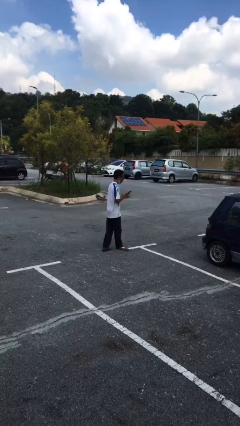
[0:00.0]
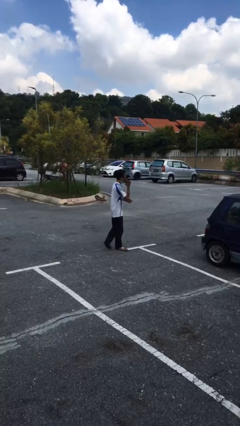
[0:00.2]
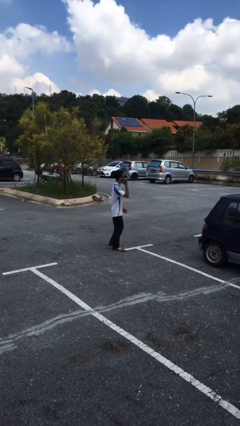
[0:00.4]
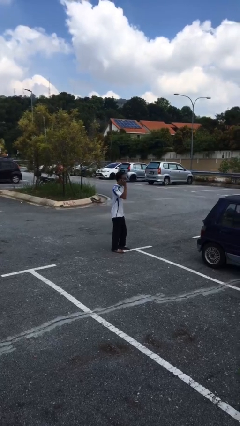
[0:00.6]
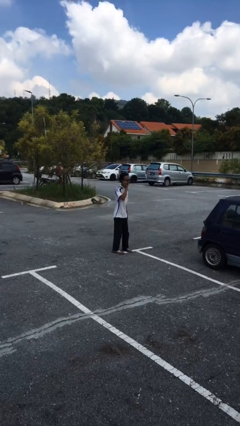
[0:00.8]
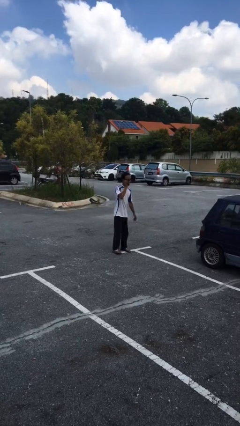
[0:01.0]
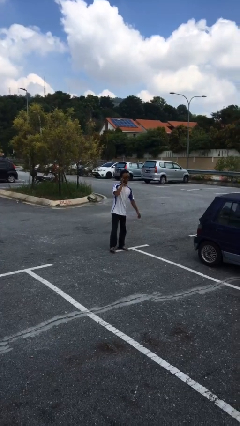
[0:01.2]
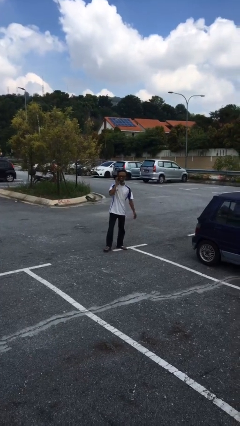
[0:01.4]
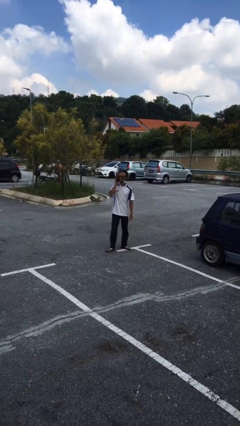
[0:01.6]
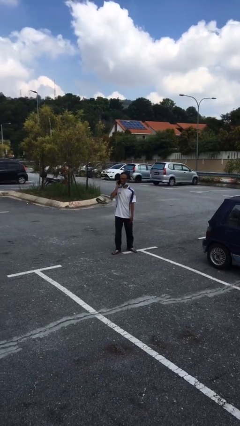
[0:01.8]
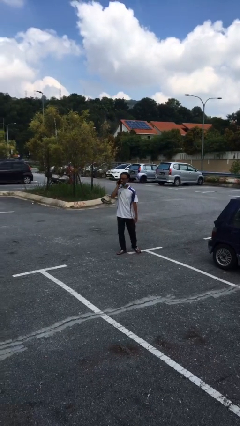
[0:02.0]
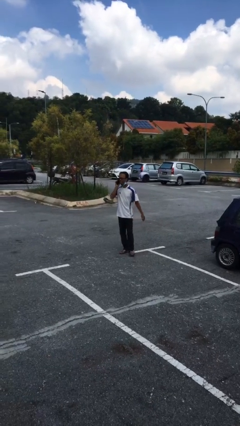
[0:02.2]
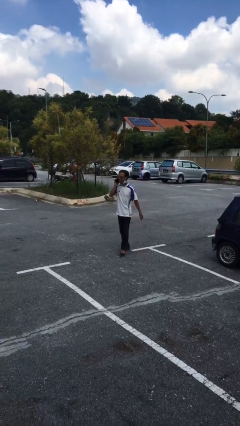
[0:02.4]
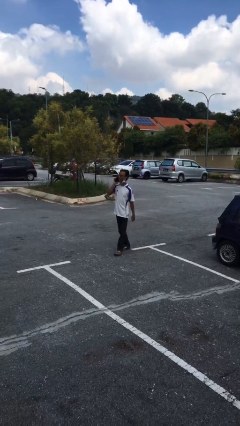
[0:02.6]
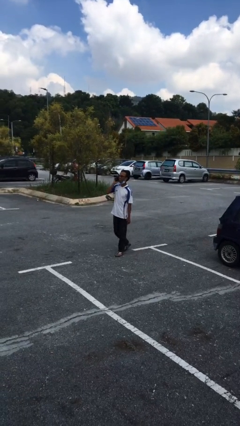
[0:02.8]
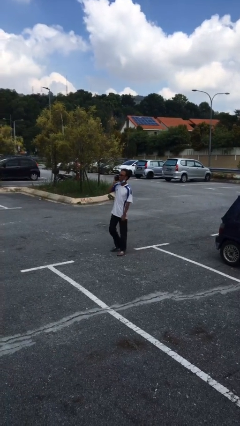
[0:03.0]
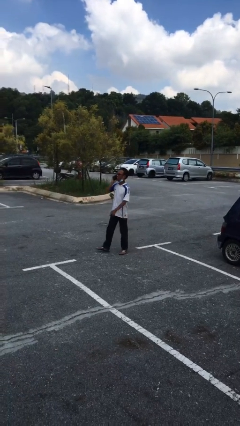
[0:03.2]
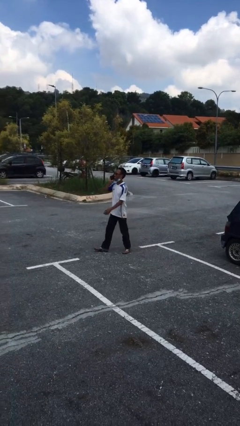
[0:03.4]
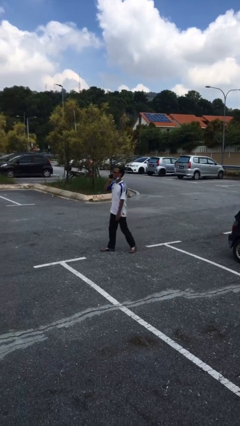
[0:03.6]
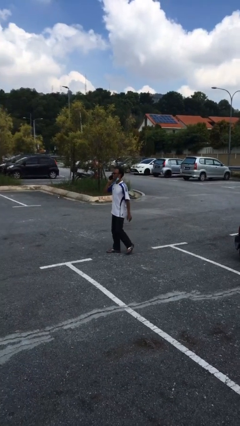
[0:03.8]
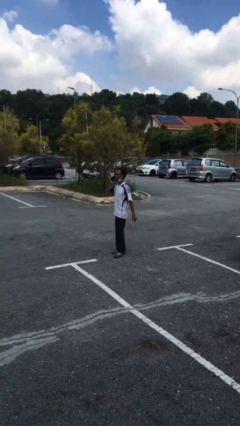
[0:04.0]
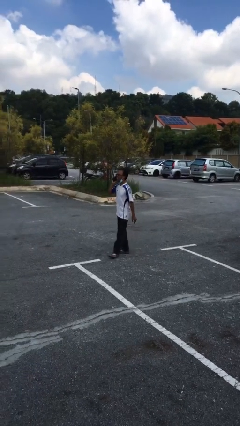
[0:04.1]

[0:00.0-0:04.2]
person talks on phone

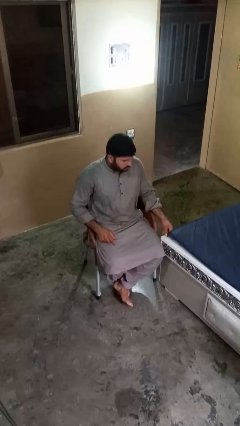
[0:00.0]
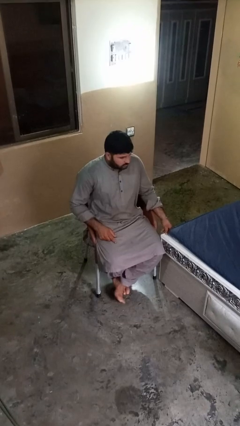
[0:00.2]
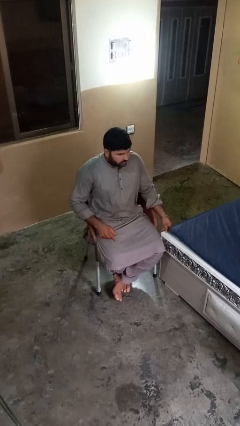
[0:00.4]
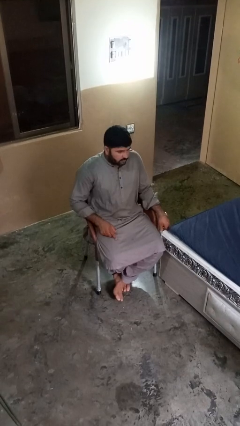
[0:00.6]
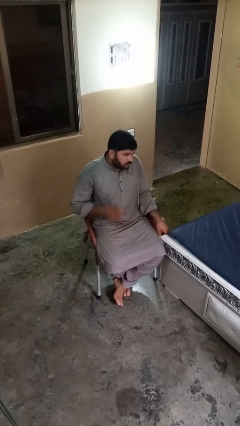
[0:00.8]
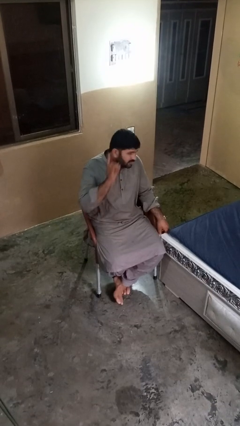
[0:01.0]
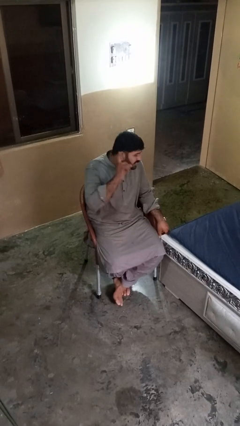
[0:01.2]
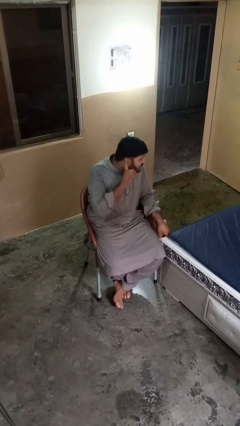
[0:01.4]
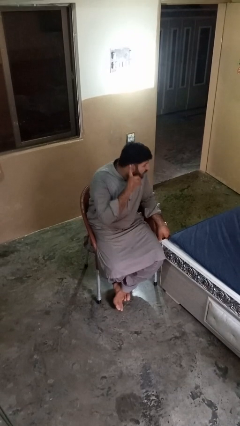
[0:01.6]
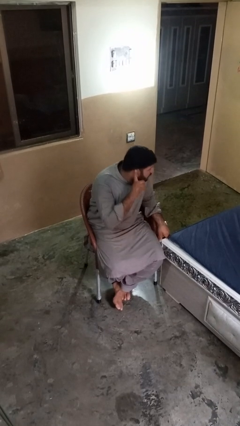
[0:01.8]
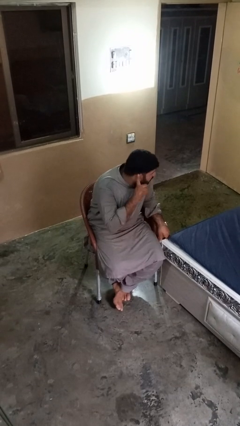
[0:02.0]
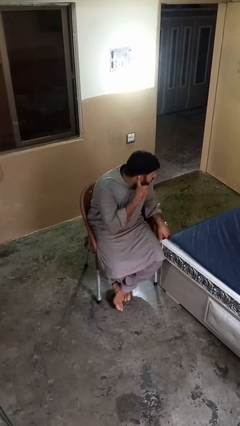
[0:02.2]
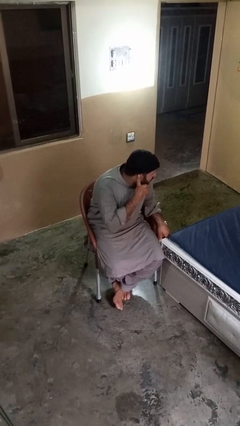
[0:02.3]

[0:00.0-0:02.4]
person gestures listen closely

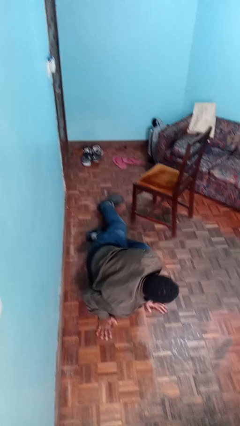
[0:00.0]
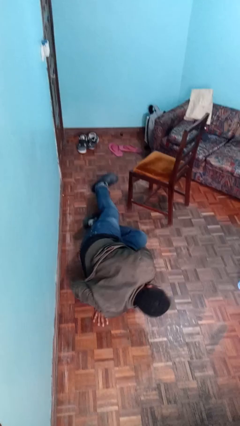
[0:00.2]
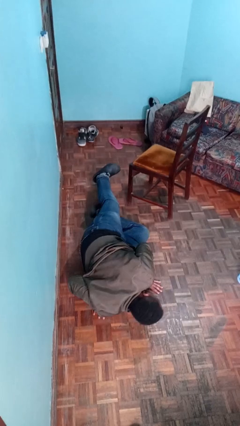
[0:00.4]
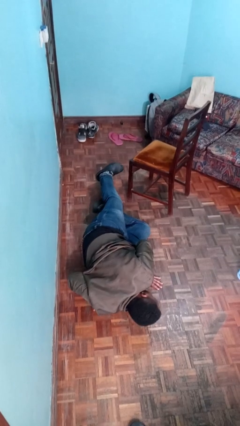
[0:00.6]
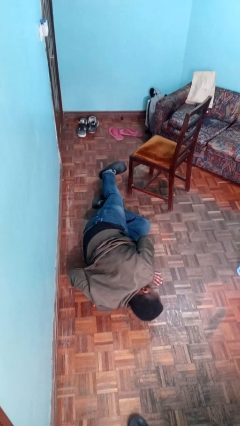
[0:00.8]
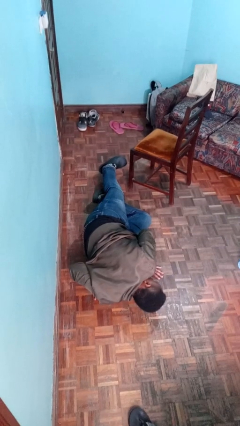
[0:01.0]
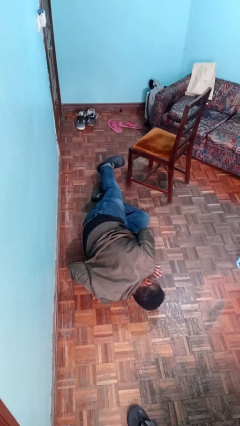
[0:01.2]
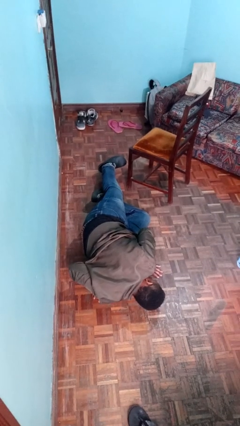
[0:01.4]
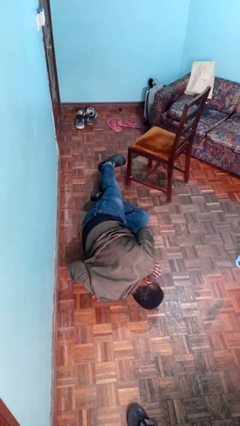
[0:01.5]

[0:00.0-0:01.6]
person lies down on floor

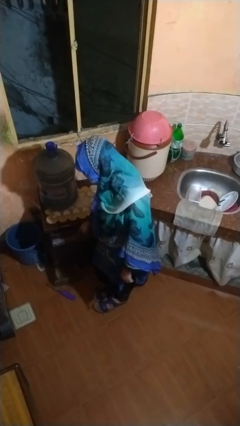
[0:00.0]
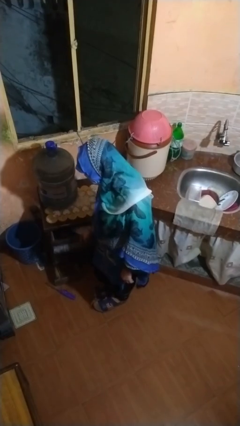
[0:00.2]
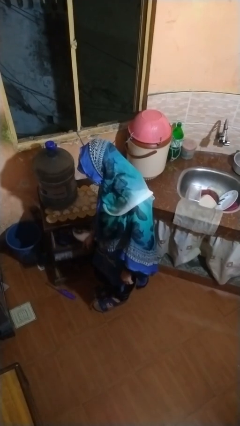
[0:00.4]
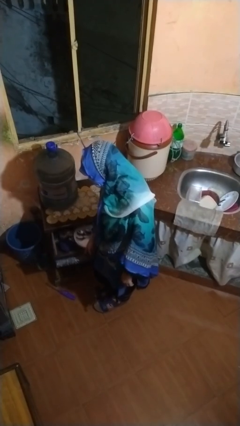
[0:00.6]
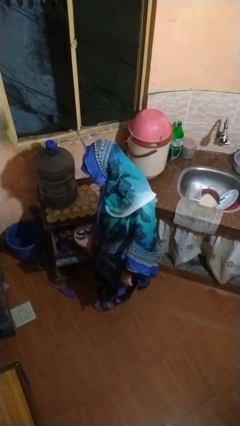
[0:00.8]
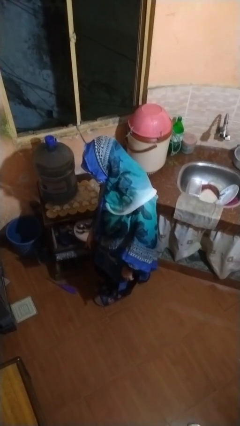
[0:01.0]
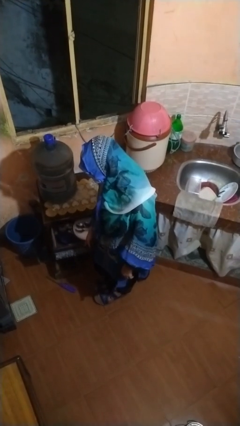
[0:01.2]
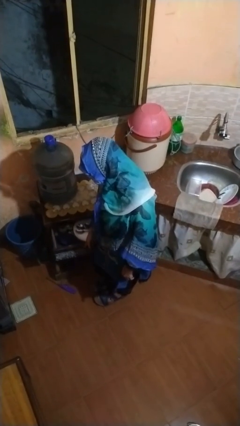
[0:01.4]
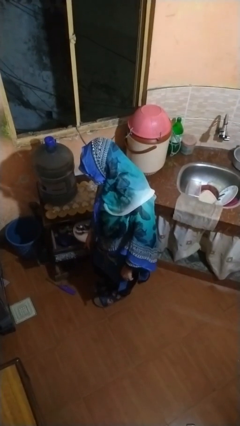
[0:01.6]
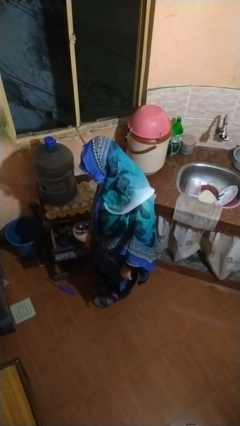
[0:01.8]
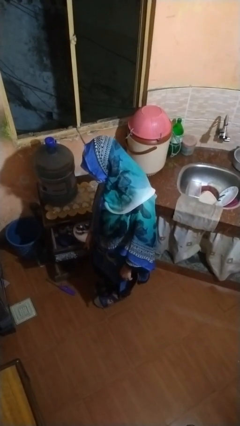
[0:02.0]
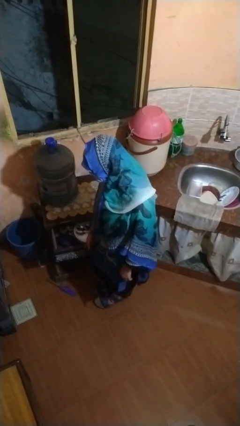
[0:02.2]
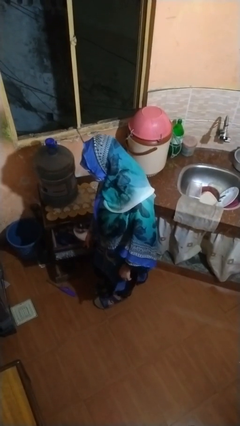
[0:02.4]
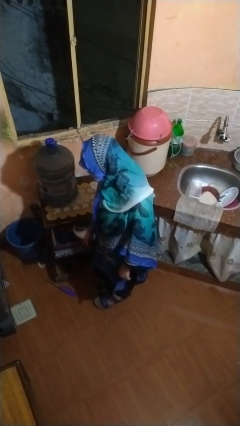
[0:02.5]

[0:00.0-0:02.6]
person opens kitchen drawer

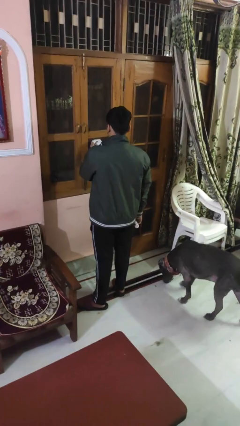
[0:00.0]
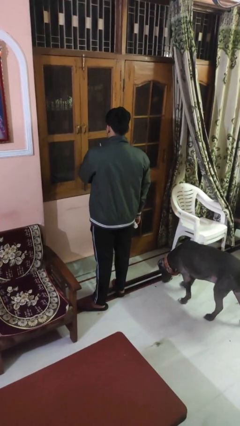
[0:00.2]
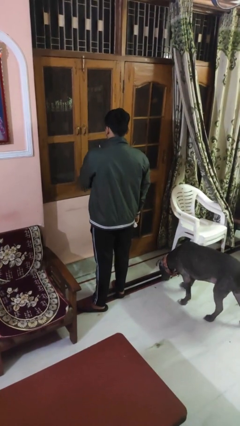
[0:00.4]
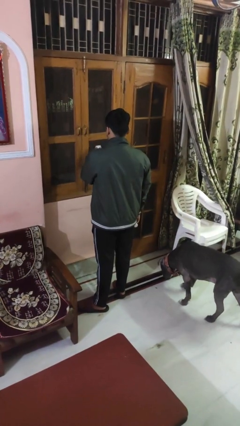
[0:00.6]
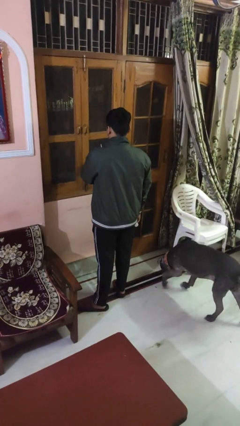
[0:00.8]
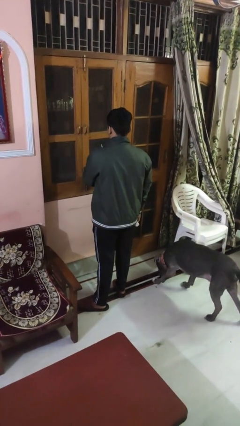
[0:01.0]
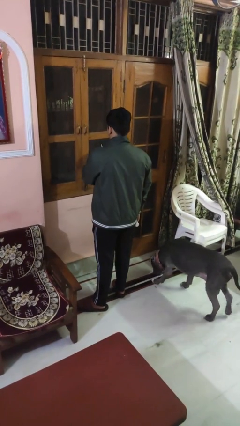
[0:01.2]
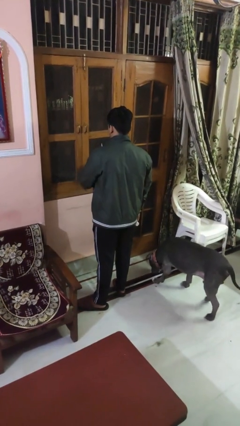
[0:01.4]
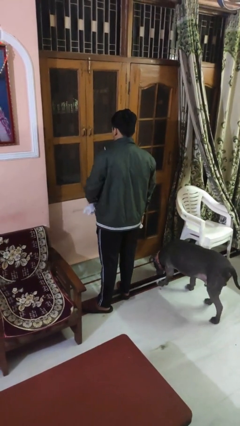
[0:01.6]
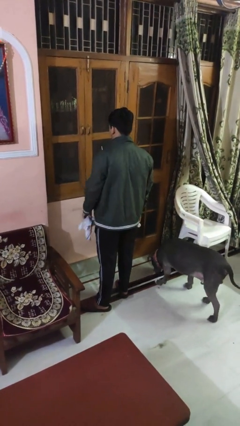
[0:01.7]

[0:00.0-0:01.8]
person washes window

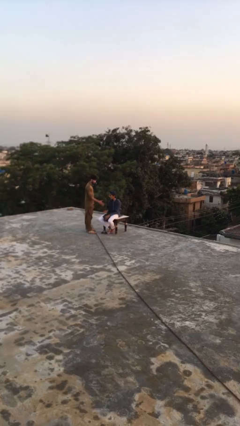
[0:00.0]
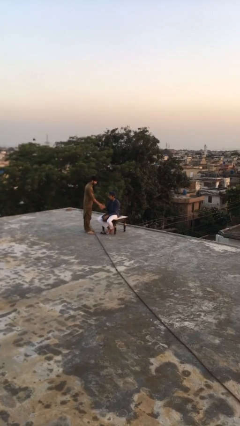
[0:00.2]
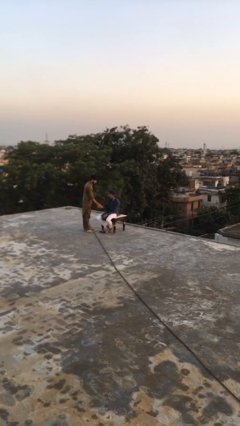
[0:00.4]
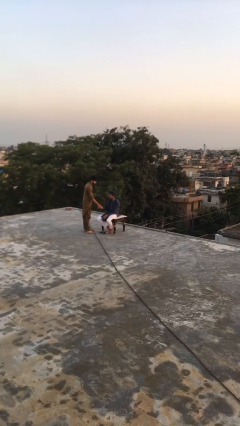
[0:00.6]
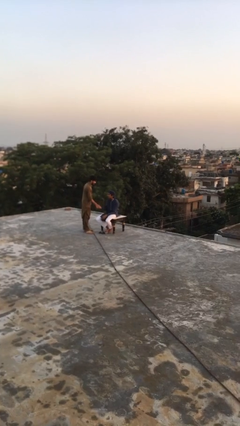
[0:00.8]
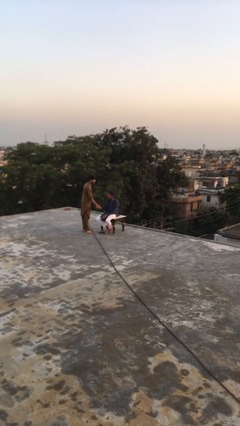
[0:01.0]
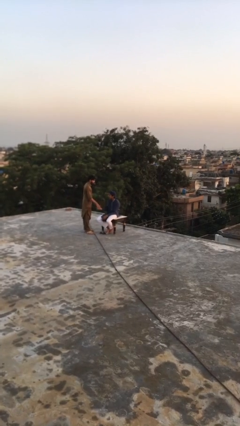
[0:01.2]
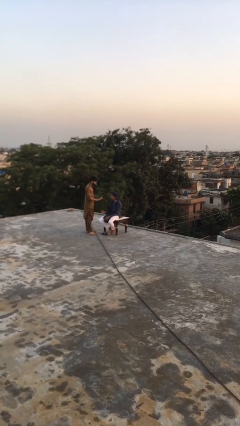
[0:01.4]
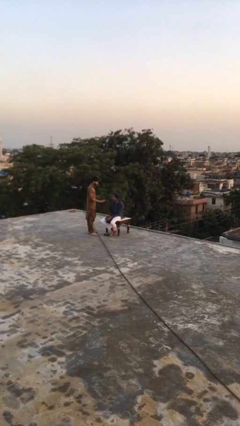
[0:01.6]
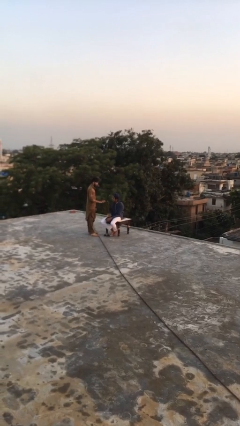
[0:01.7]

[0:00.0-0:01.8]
person shakes hand

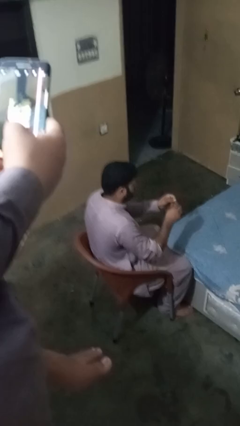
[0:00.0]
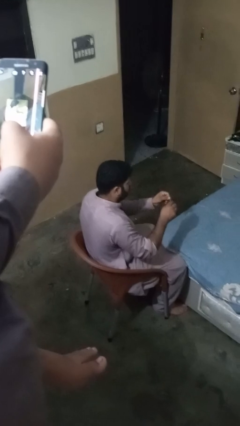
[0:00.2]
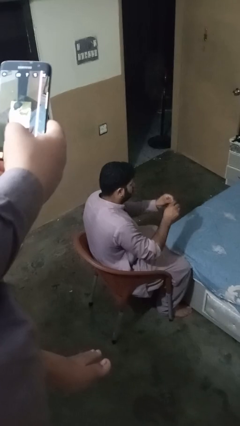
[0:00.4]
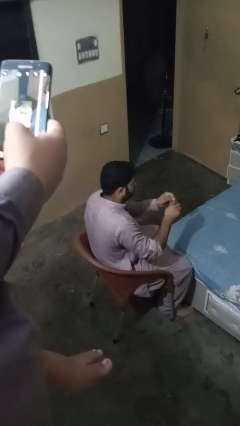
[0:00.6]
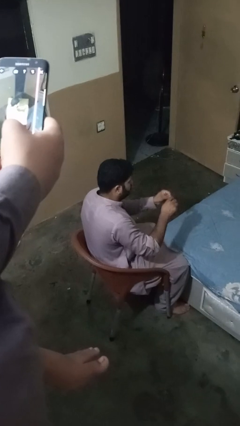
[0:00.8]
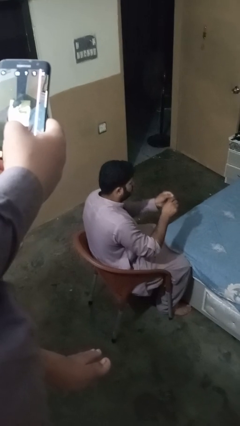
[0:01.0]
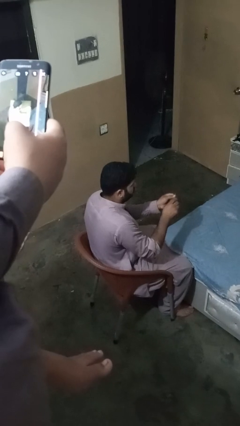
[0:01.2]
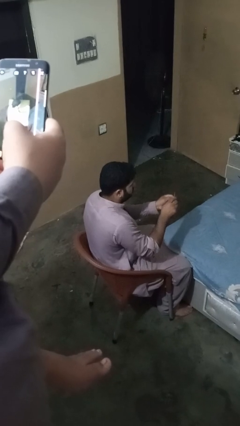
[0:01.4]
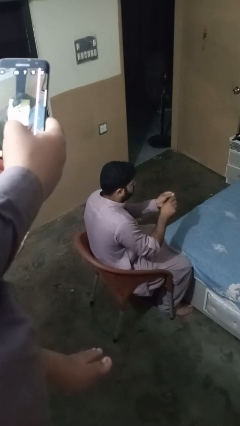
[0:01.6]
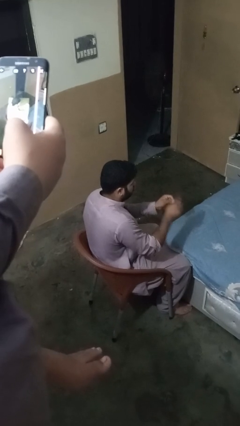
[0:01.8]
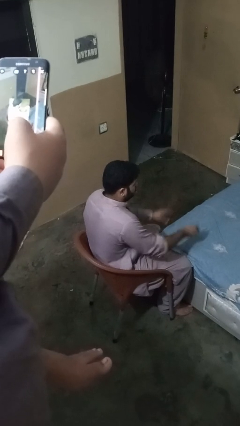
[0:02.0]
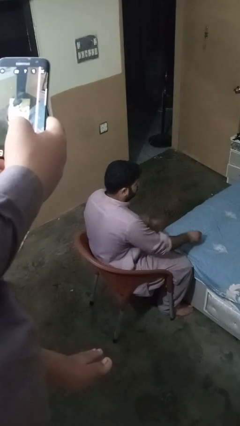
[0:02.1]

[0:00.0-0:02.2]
person files fingernails
